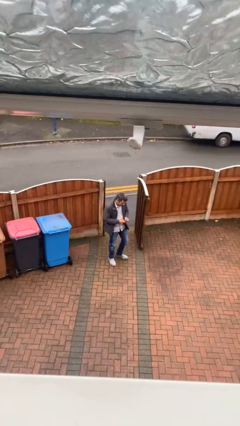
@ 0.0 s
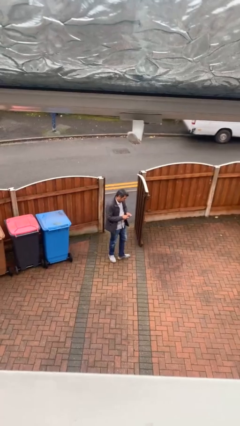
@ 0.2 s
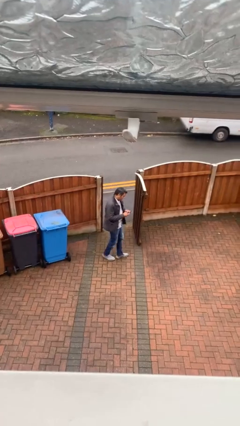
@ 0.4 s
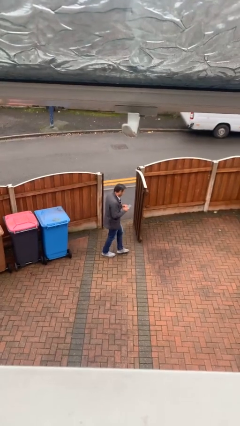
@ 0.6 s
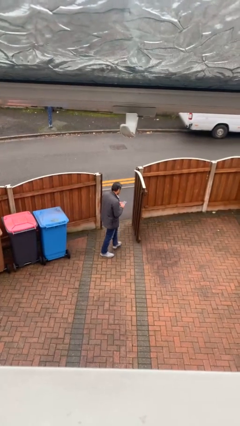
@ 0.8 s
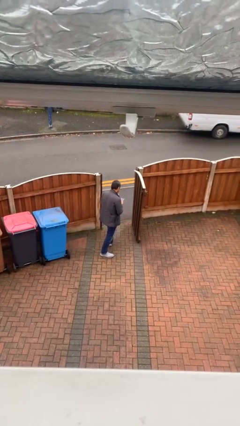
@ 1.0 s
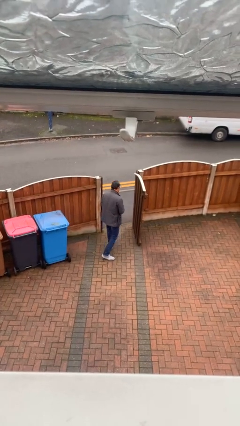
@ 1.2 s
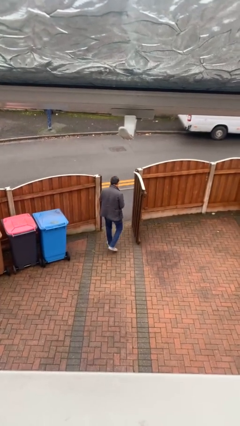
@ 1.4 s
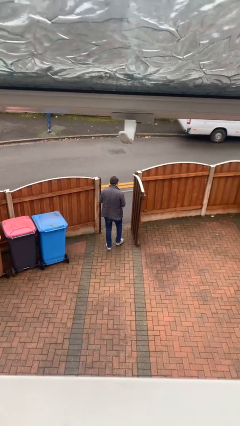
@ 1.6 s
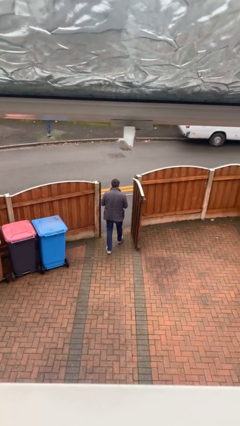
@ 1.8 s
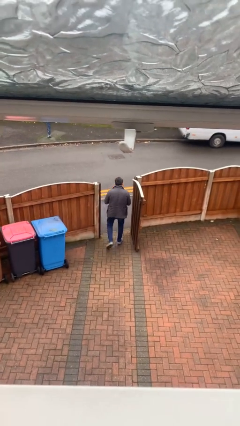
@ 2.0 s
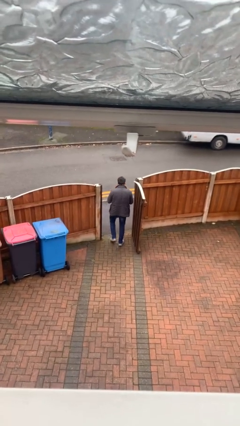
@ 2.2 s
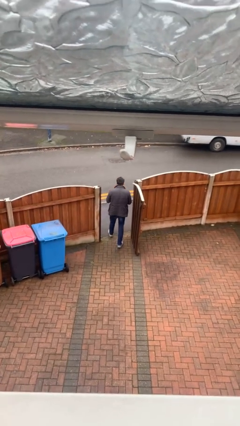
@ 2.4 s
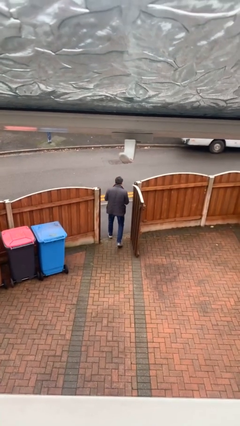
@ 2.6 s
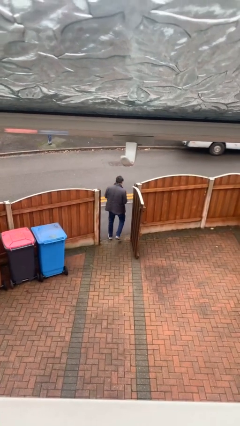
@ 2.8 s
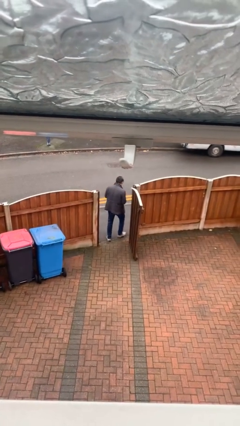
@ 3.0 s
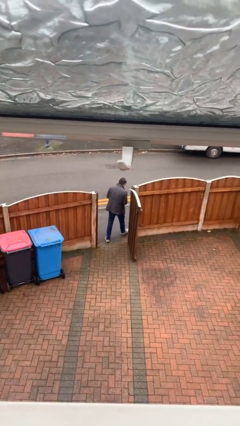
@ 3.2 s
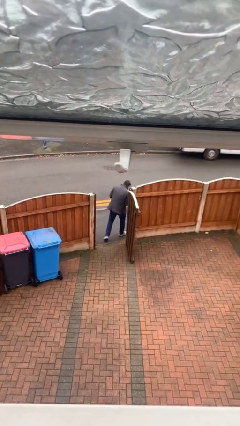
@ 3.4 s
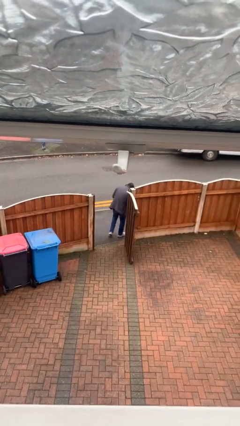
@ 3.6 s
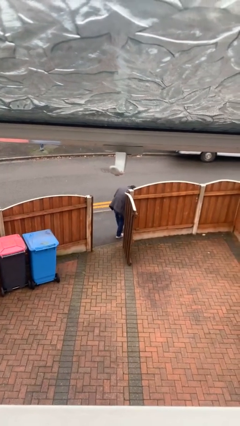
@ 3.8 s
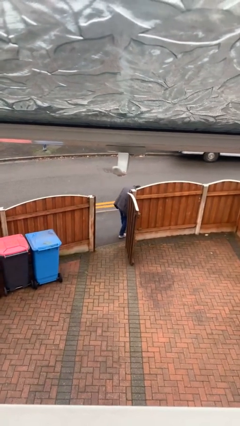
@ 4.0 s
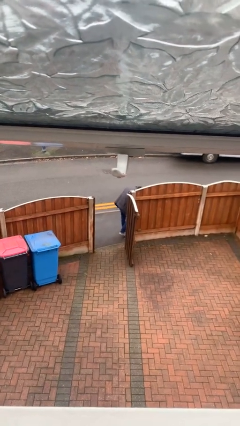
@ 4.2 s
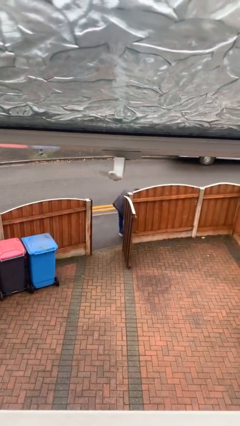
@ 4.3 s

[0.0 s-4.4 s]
person exits scene through structure

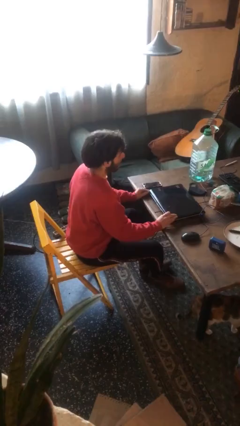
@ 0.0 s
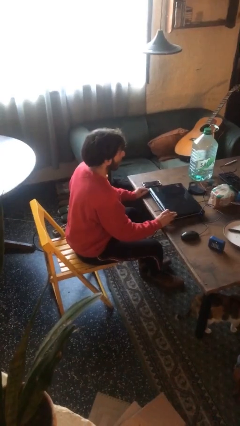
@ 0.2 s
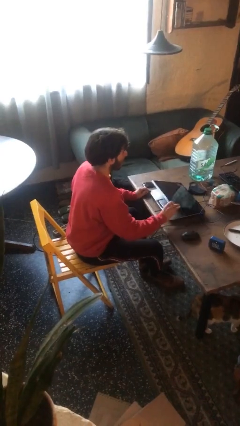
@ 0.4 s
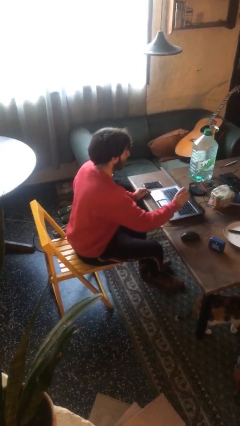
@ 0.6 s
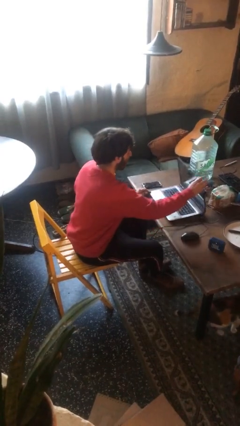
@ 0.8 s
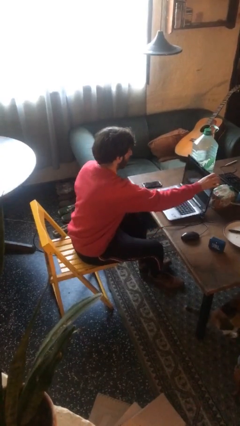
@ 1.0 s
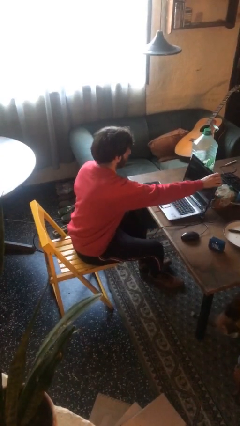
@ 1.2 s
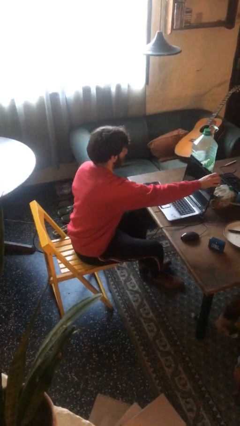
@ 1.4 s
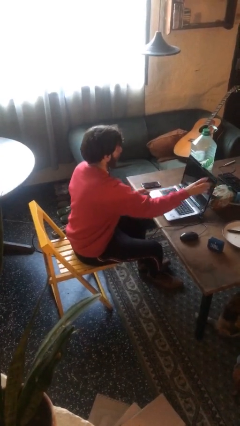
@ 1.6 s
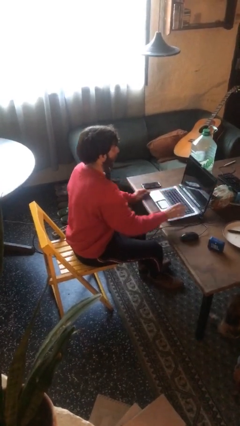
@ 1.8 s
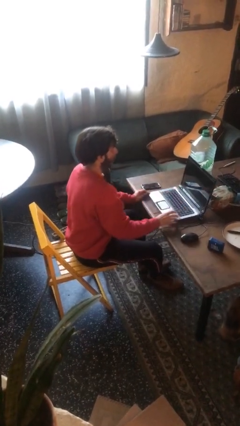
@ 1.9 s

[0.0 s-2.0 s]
person opens laptop

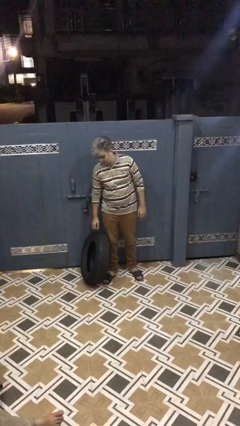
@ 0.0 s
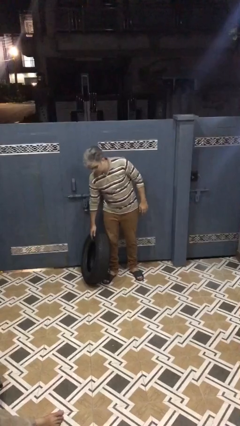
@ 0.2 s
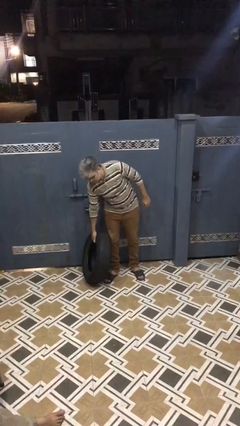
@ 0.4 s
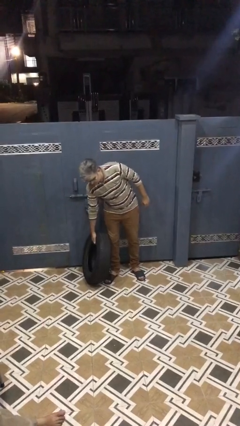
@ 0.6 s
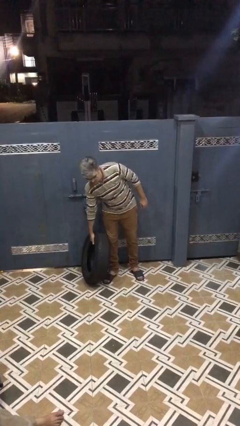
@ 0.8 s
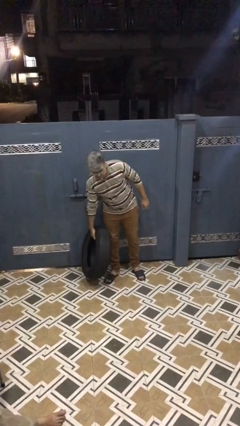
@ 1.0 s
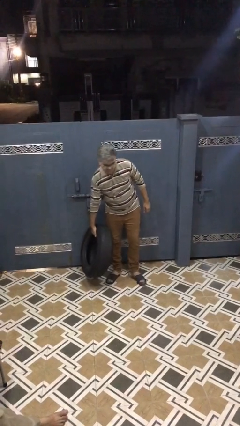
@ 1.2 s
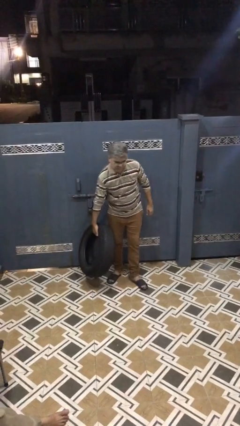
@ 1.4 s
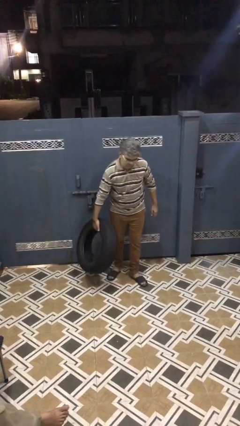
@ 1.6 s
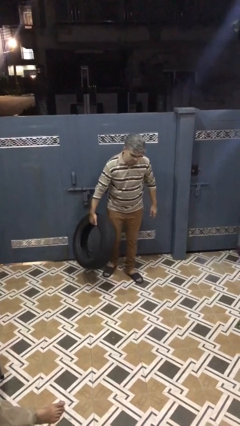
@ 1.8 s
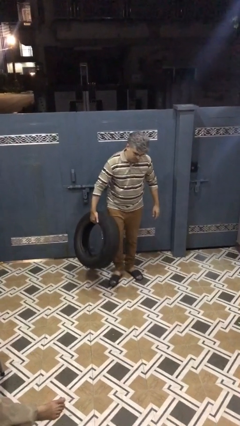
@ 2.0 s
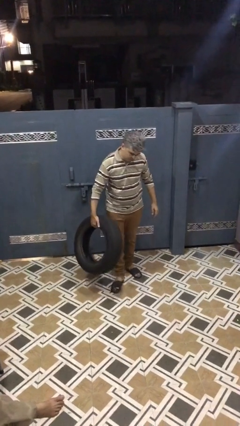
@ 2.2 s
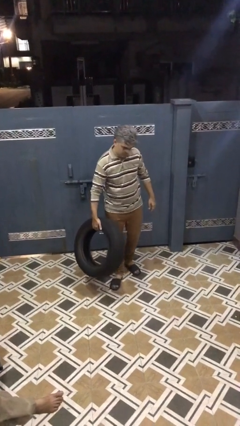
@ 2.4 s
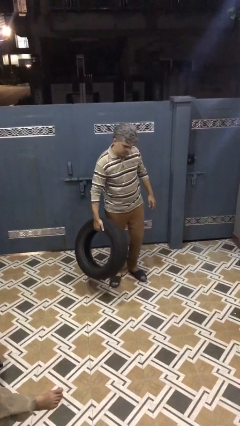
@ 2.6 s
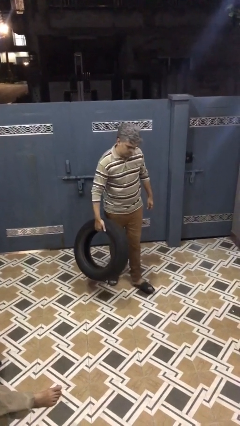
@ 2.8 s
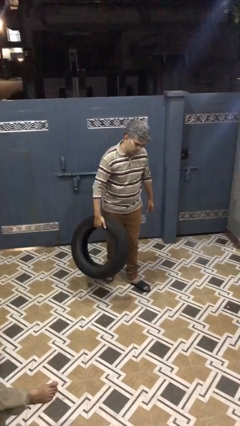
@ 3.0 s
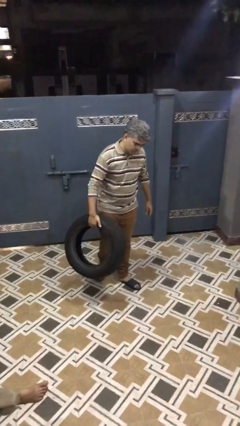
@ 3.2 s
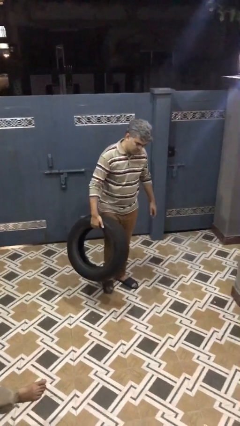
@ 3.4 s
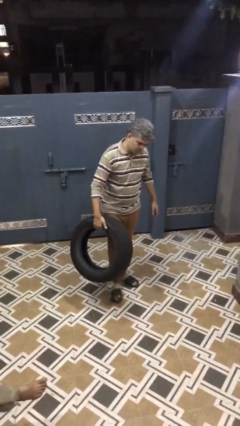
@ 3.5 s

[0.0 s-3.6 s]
person carries heavy object

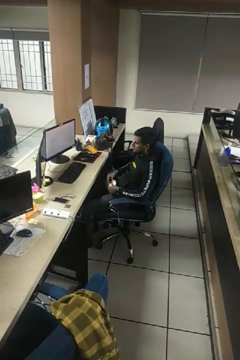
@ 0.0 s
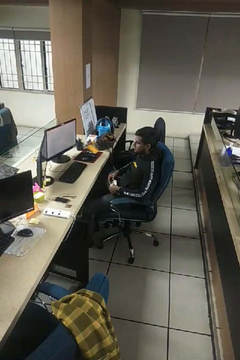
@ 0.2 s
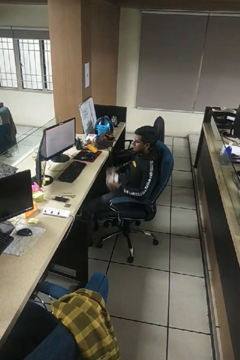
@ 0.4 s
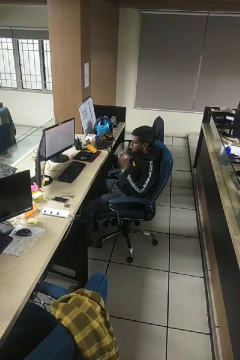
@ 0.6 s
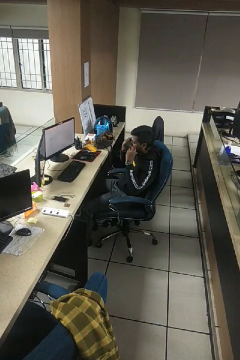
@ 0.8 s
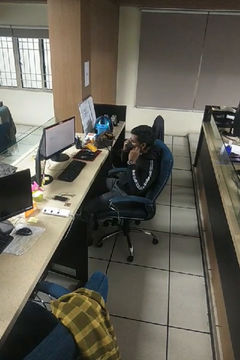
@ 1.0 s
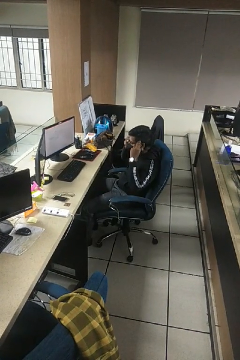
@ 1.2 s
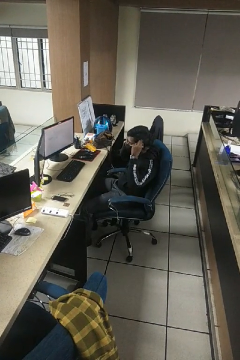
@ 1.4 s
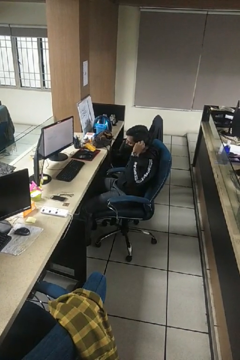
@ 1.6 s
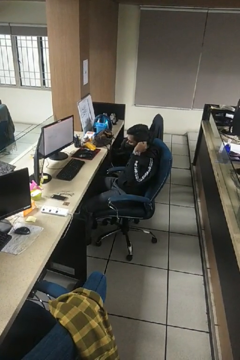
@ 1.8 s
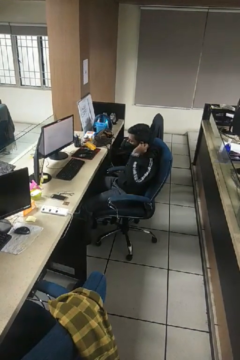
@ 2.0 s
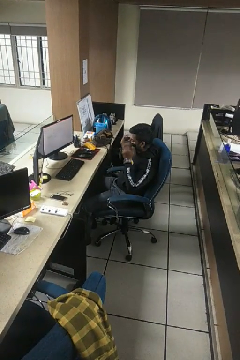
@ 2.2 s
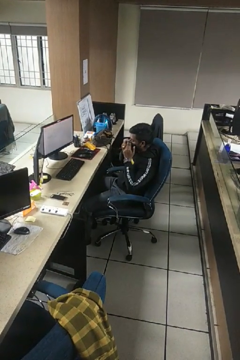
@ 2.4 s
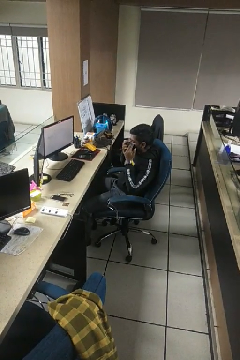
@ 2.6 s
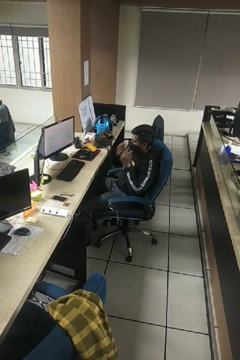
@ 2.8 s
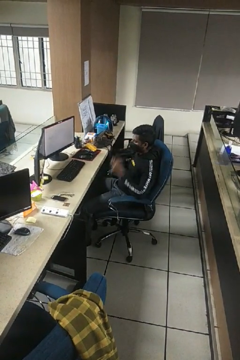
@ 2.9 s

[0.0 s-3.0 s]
person puts on facemask

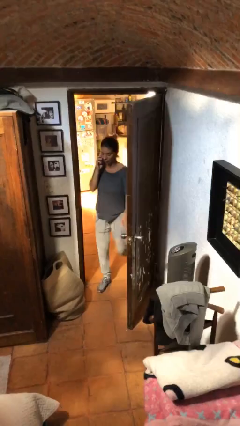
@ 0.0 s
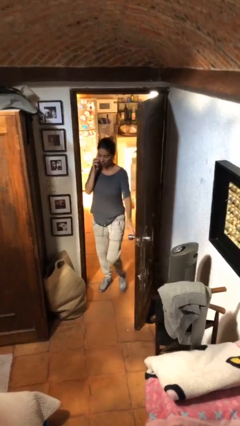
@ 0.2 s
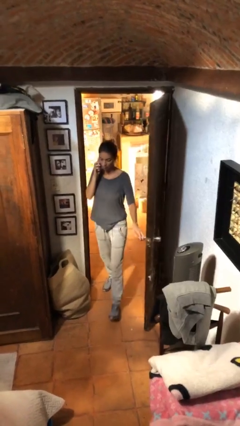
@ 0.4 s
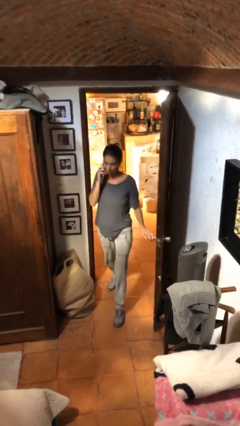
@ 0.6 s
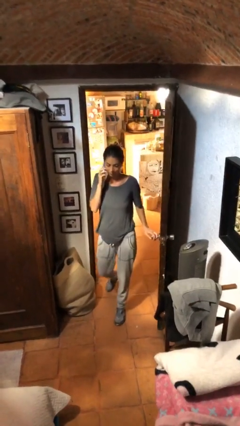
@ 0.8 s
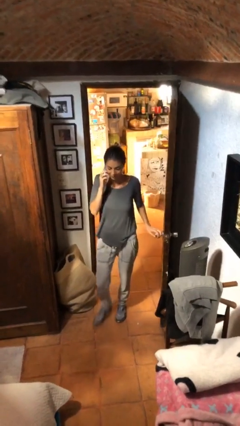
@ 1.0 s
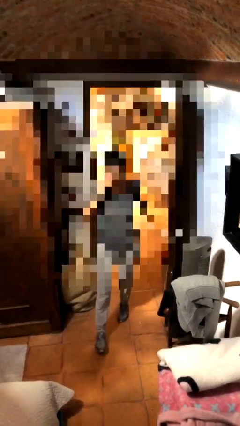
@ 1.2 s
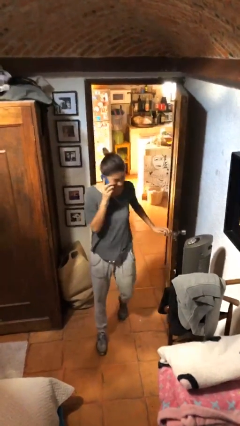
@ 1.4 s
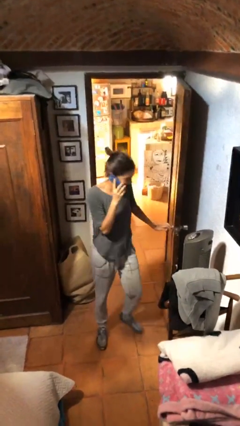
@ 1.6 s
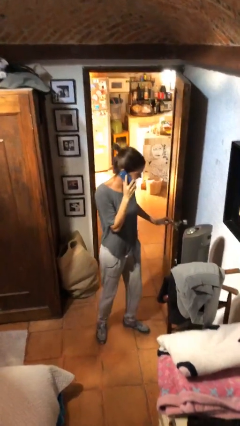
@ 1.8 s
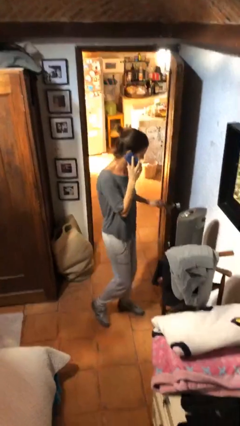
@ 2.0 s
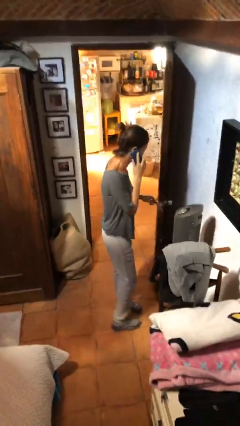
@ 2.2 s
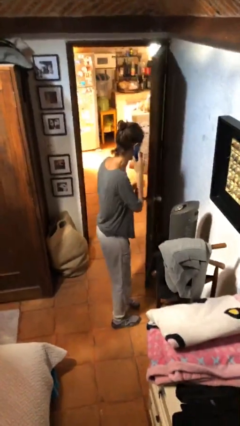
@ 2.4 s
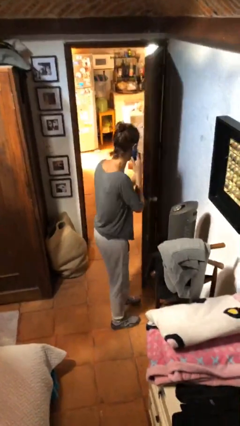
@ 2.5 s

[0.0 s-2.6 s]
person enters scene through structure

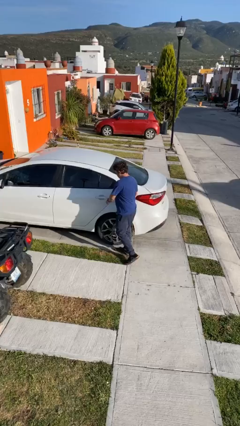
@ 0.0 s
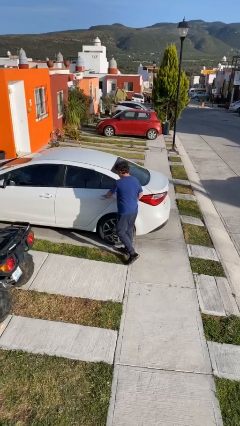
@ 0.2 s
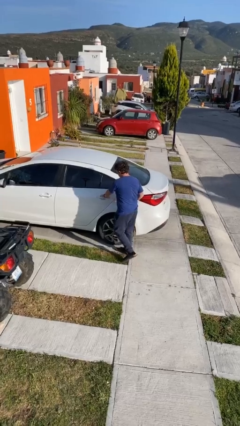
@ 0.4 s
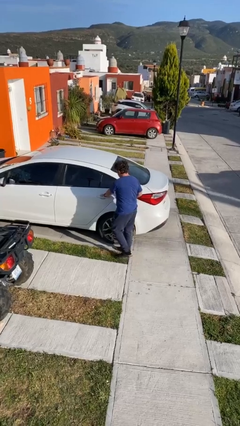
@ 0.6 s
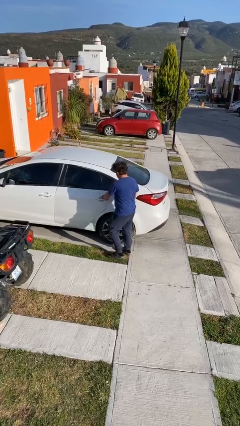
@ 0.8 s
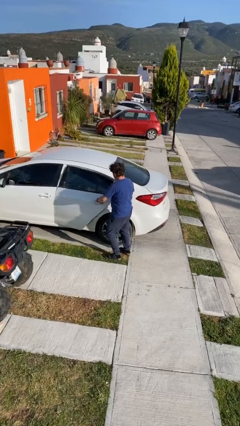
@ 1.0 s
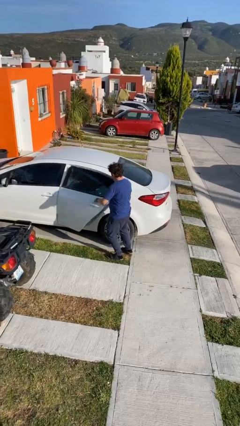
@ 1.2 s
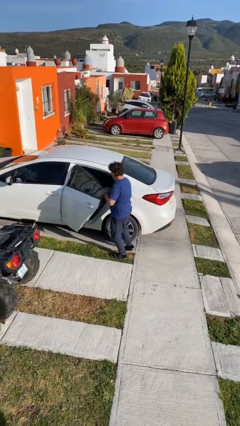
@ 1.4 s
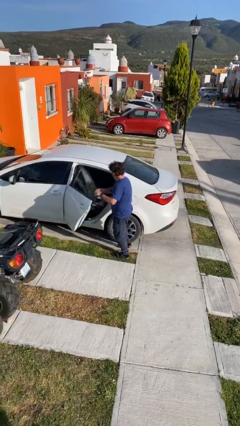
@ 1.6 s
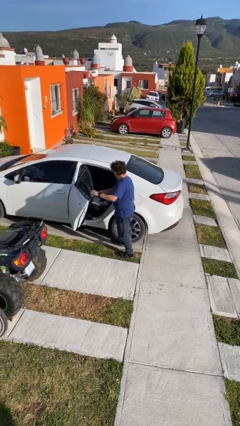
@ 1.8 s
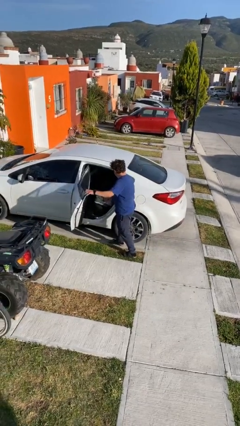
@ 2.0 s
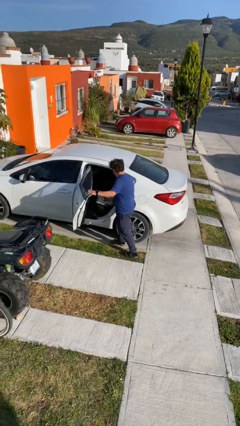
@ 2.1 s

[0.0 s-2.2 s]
person opens car door
